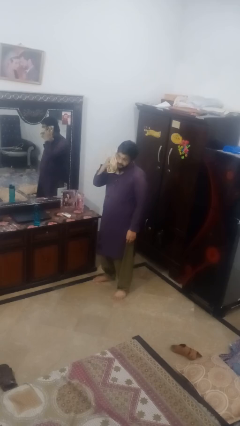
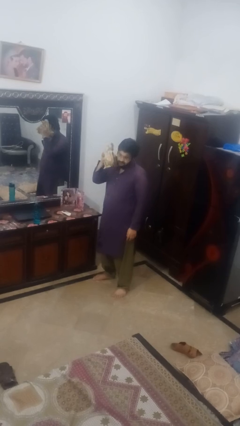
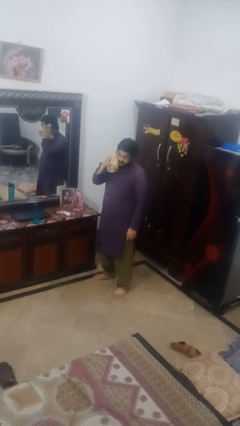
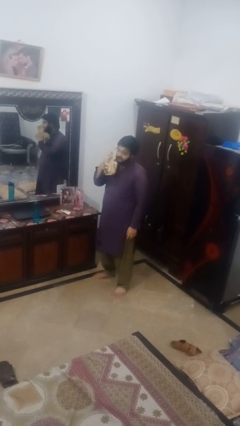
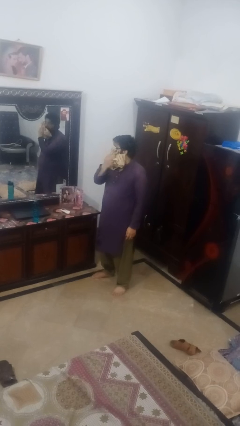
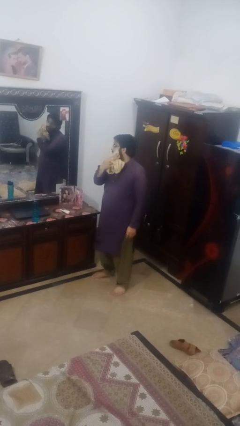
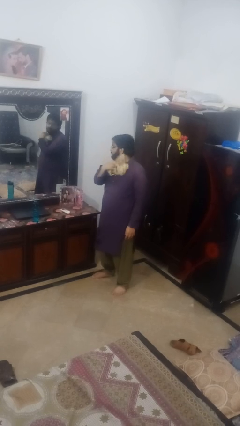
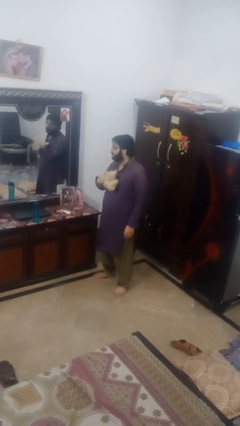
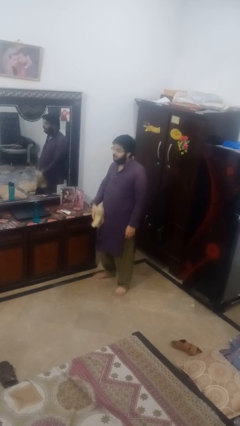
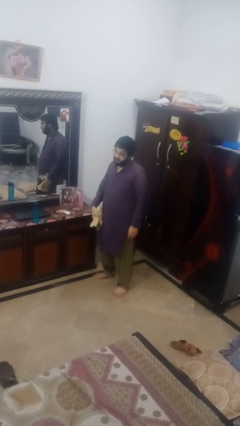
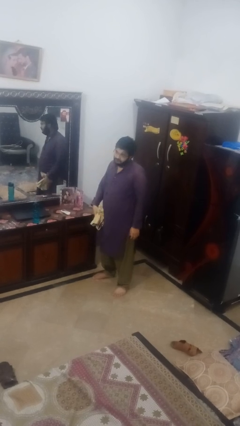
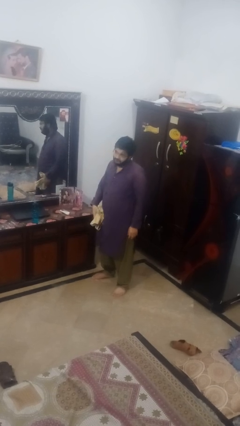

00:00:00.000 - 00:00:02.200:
person wipes mouth with napkin

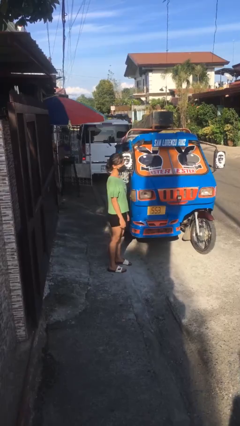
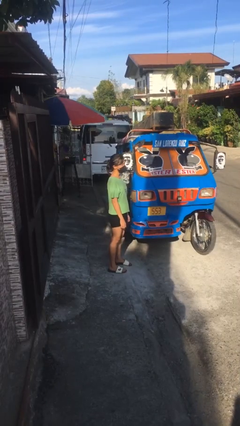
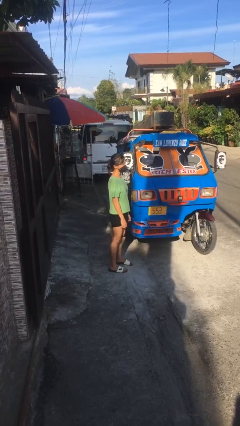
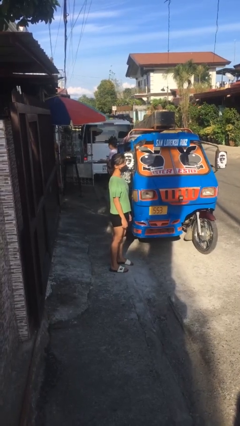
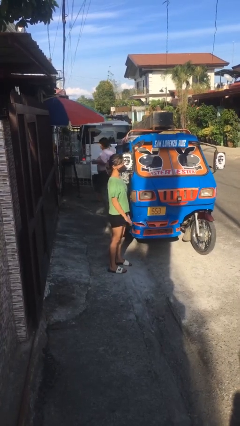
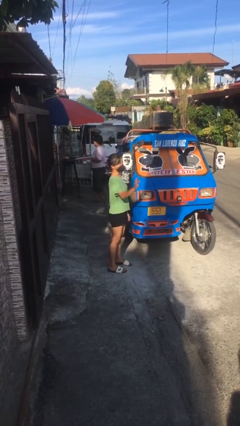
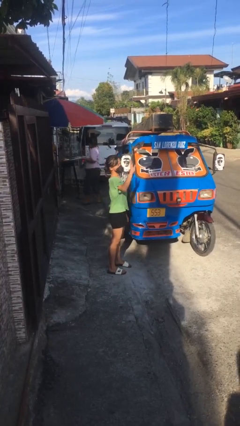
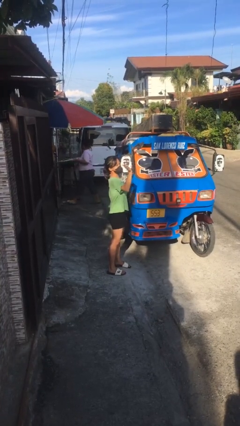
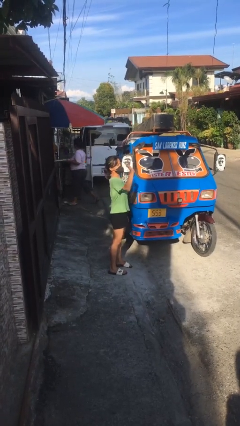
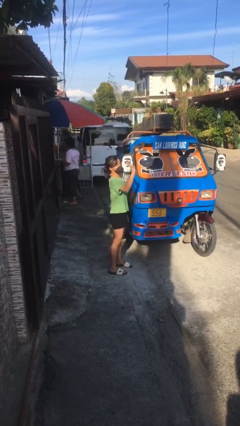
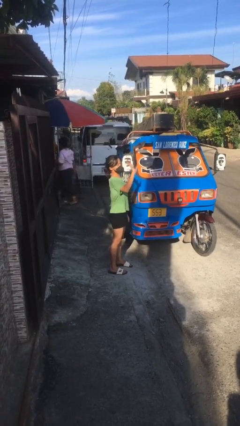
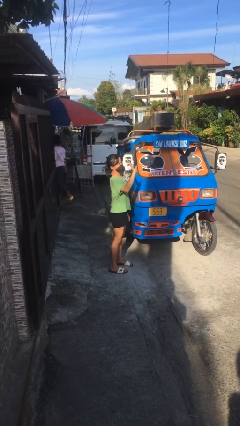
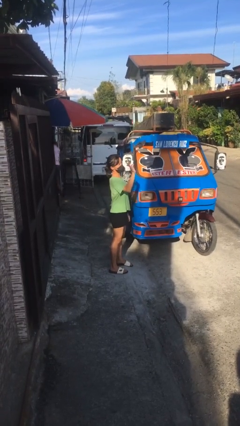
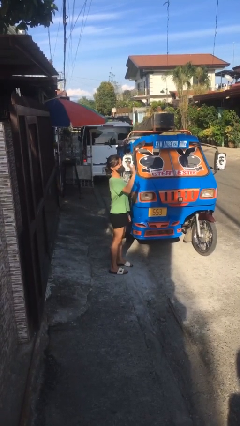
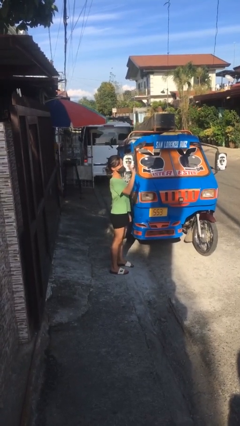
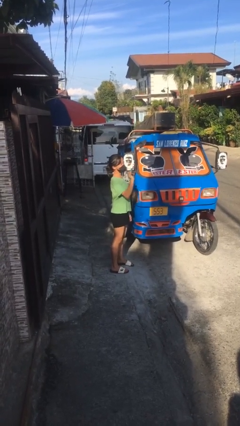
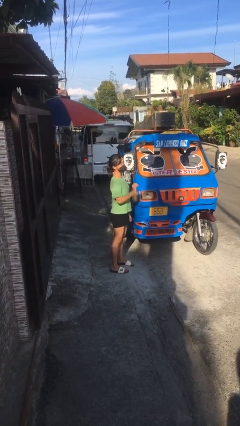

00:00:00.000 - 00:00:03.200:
person waves at person

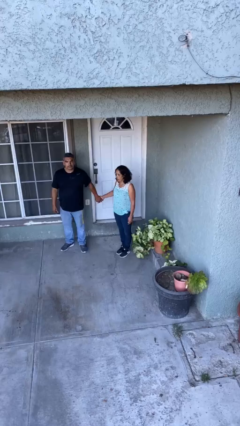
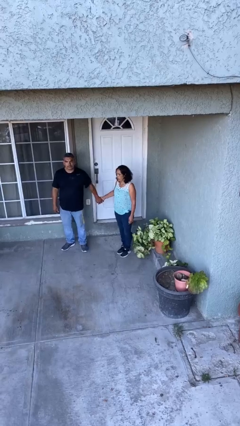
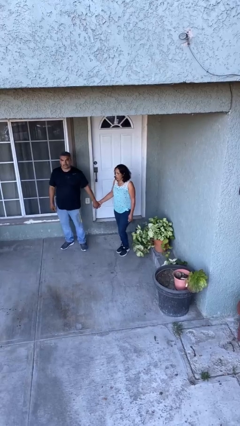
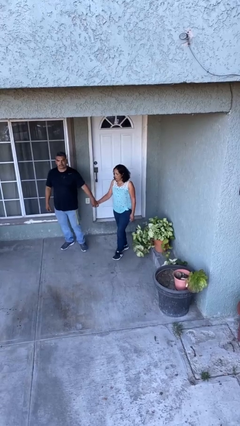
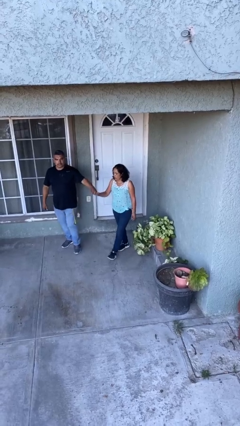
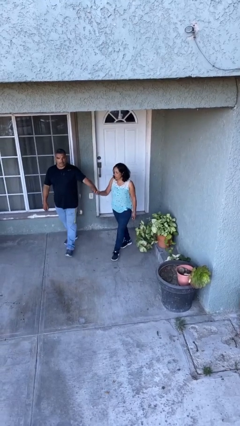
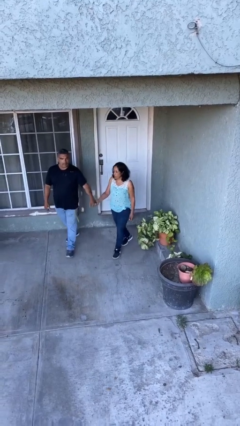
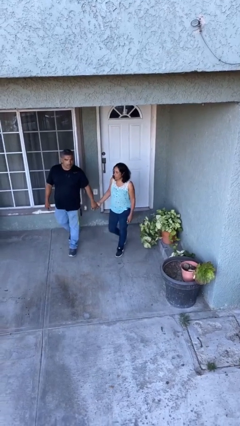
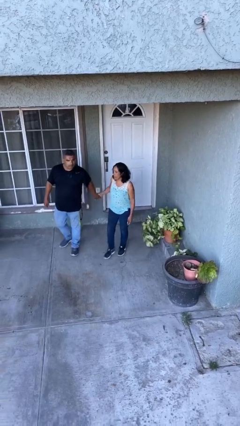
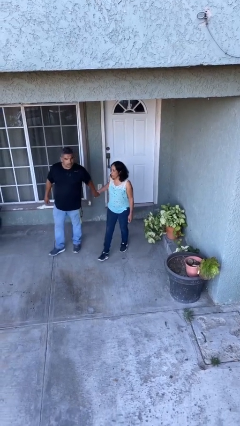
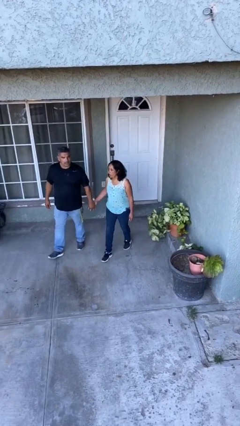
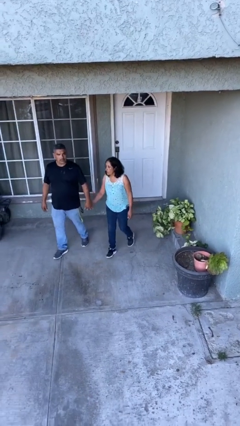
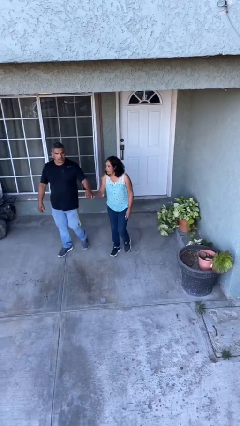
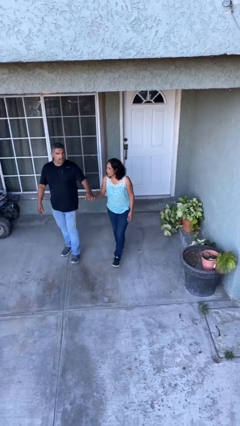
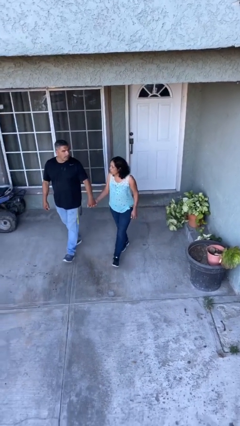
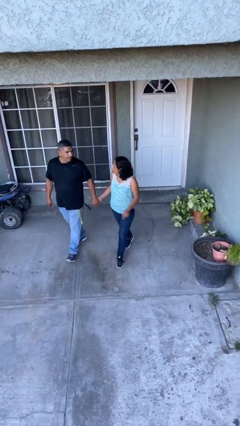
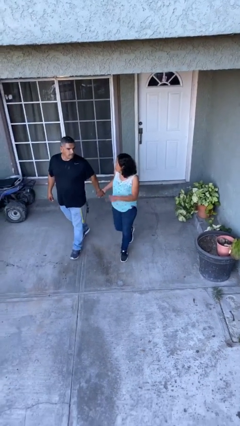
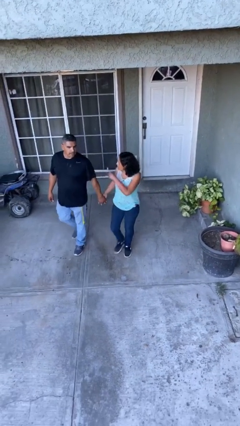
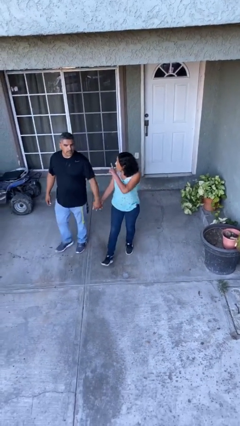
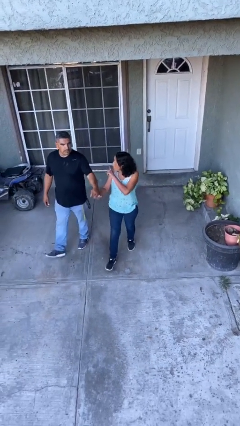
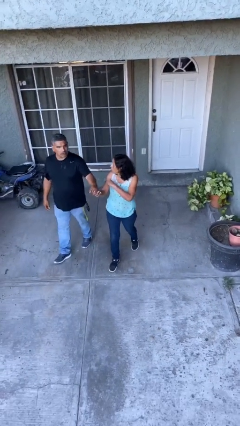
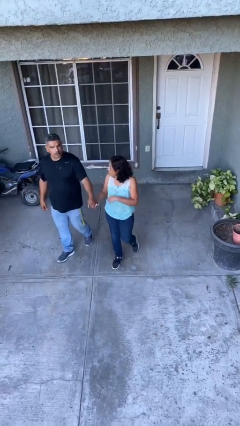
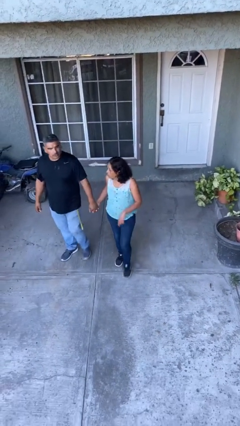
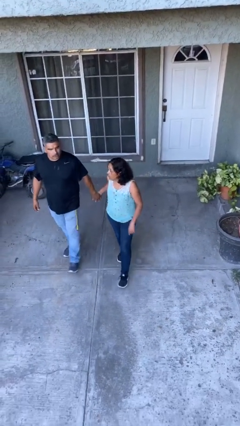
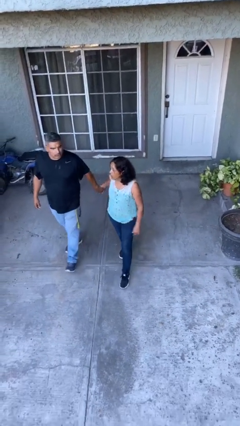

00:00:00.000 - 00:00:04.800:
person holds hand

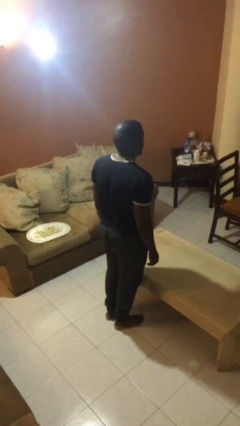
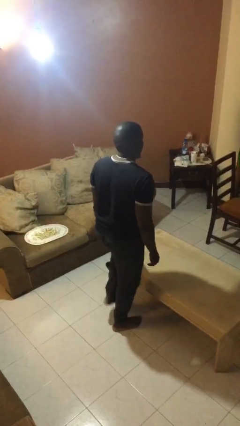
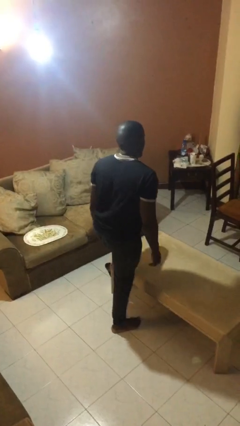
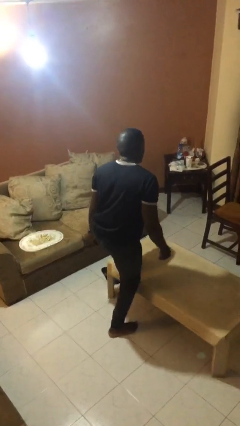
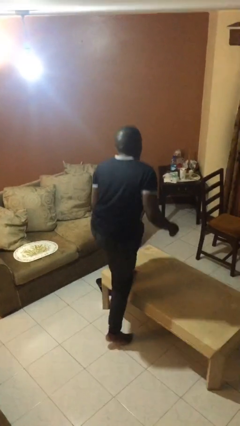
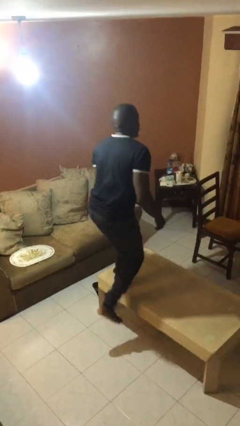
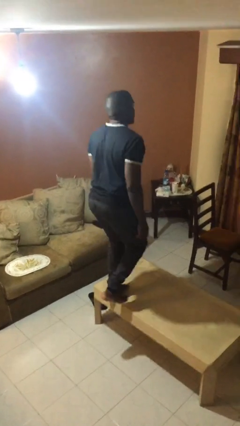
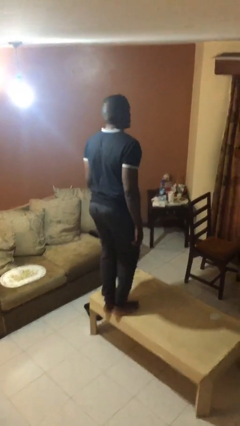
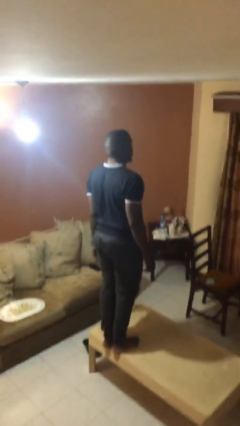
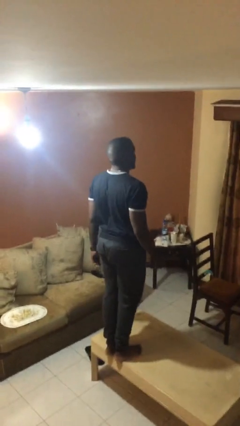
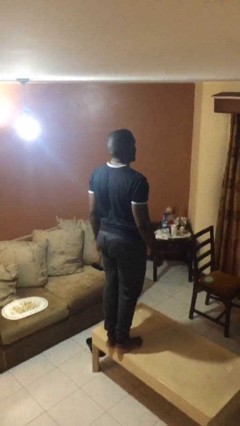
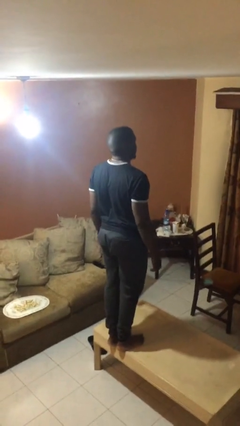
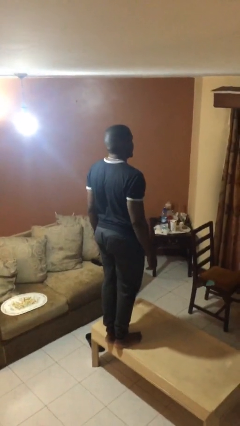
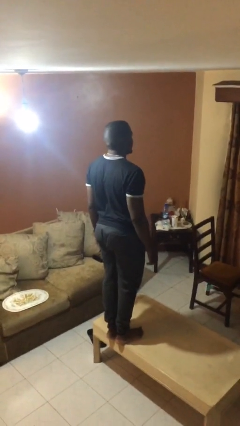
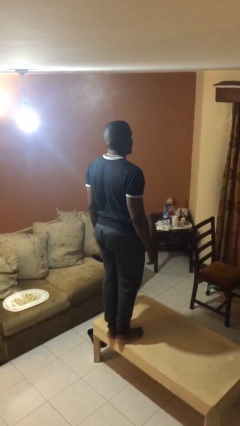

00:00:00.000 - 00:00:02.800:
person climbs on table

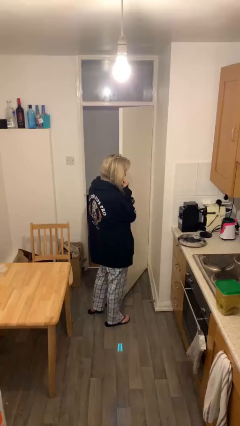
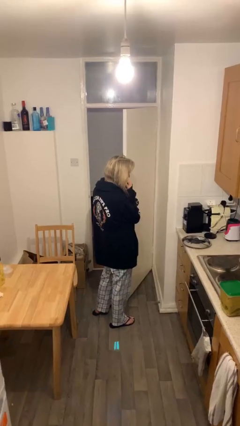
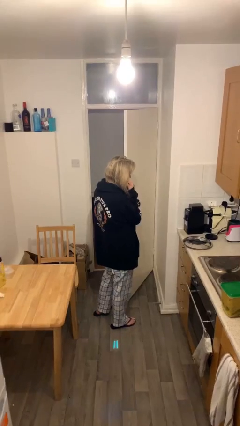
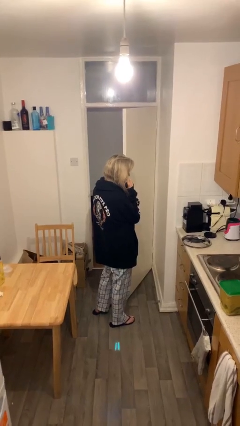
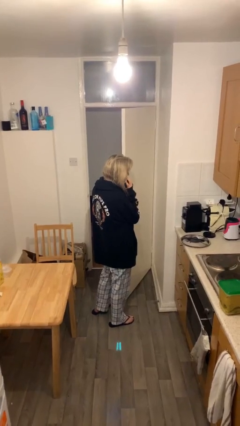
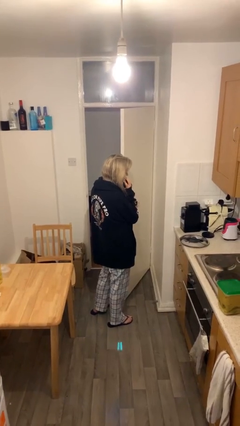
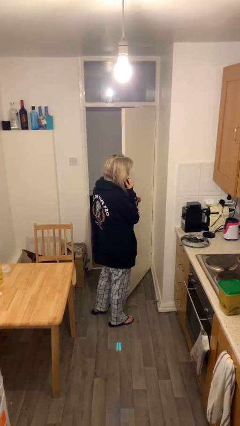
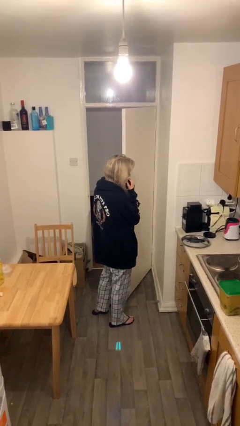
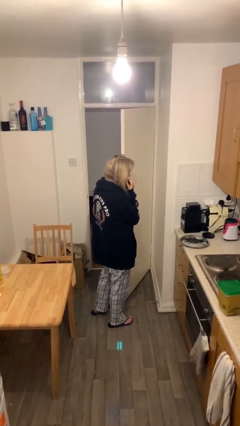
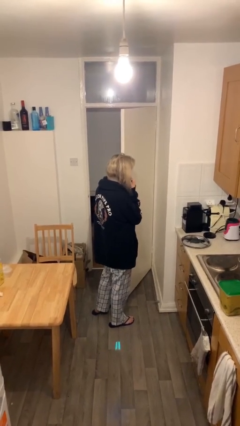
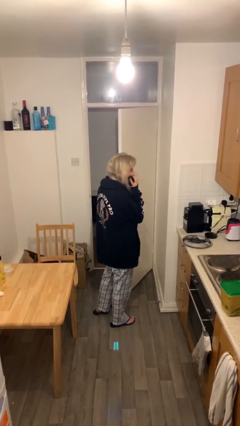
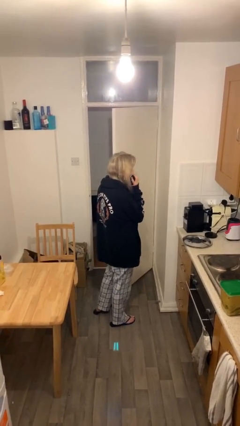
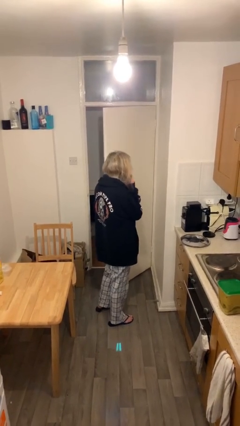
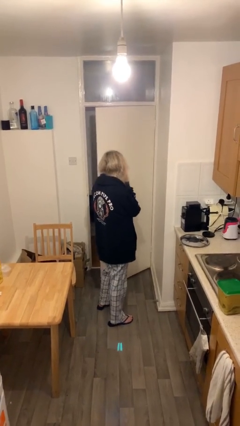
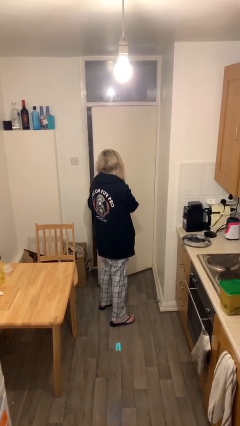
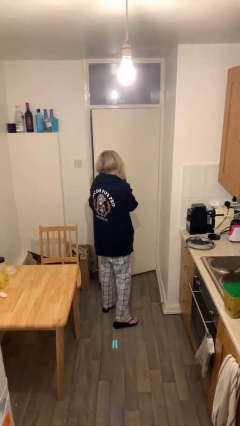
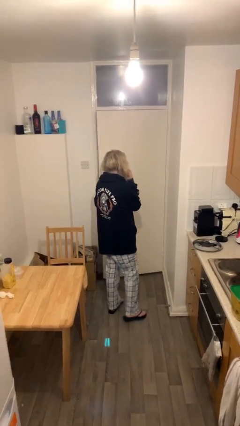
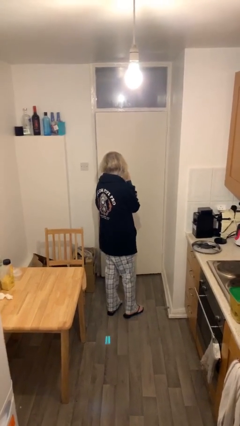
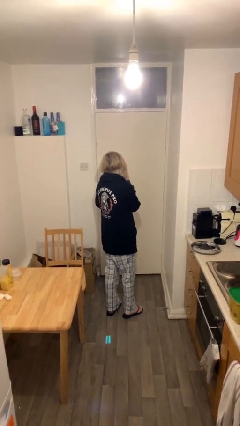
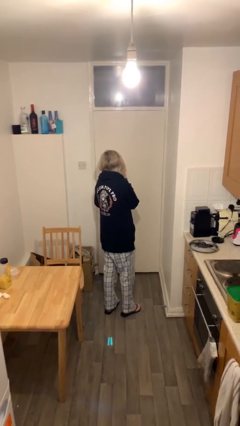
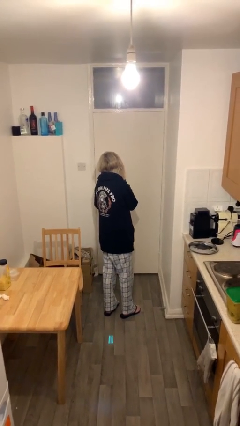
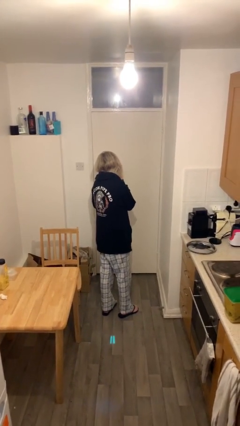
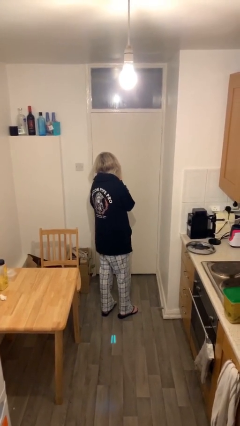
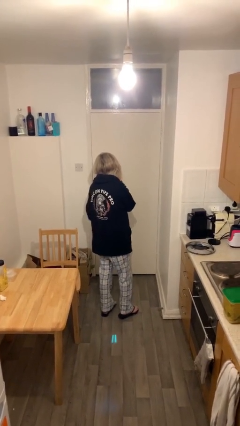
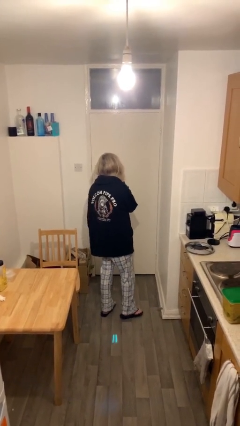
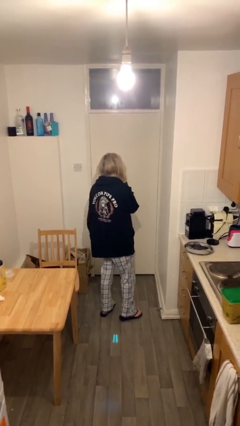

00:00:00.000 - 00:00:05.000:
person closes facility door
